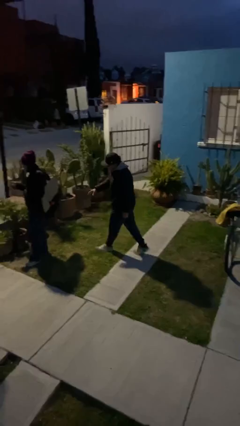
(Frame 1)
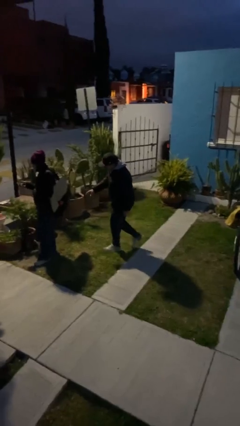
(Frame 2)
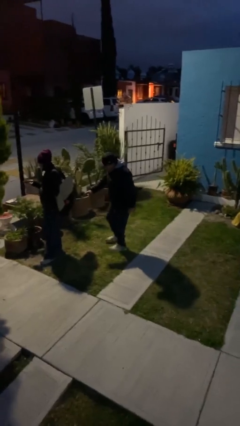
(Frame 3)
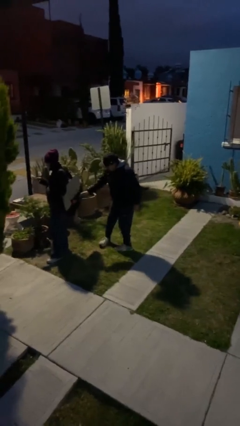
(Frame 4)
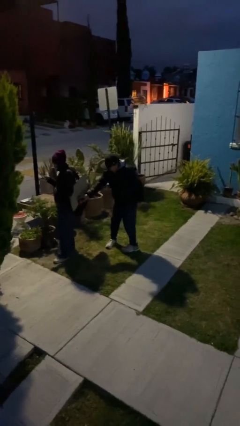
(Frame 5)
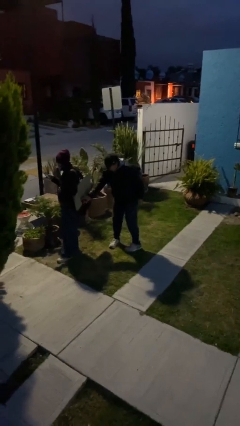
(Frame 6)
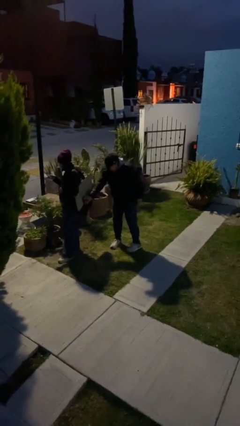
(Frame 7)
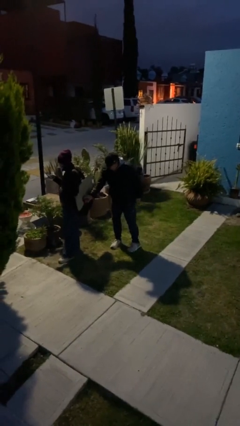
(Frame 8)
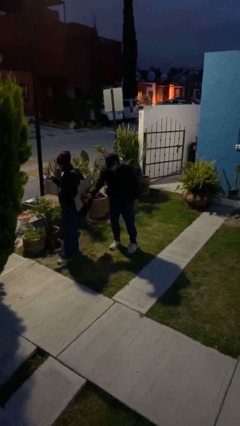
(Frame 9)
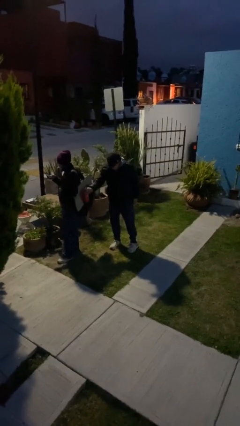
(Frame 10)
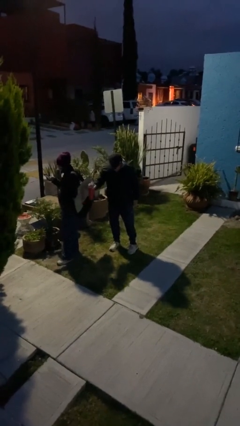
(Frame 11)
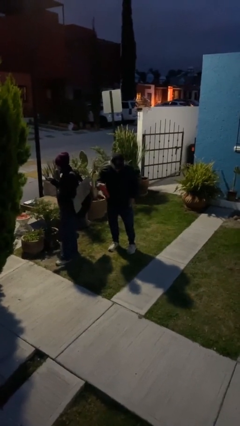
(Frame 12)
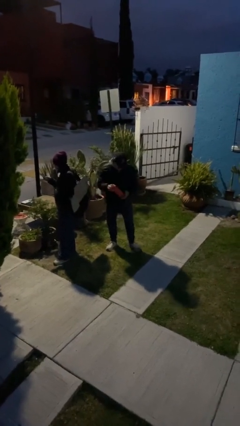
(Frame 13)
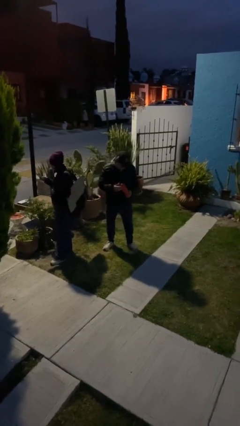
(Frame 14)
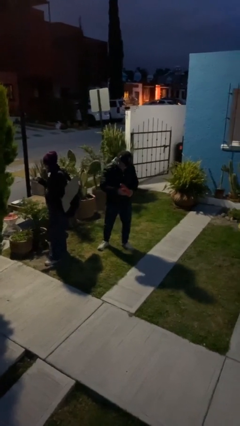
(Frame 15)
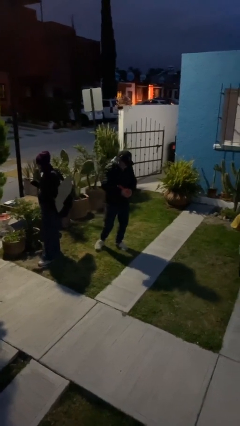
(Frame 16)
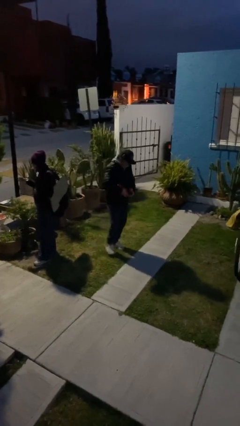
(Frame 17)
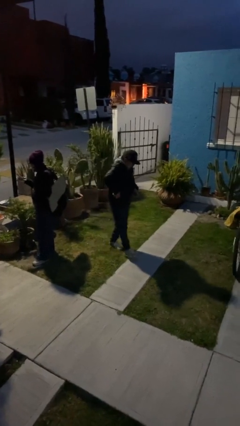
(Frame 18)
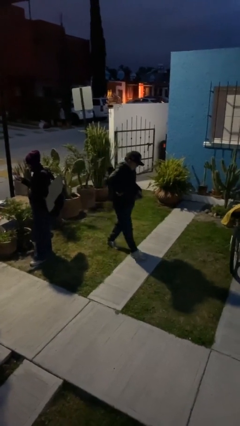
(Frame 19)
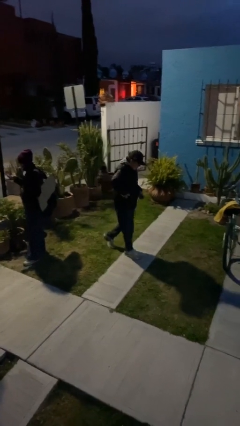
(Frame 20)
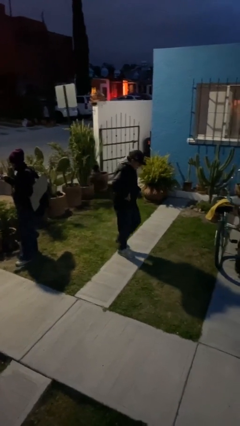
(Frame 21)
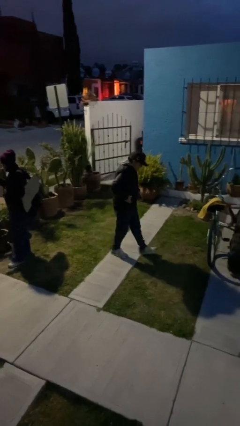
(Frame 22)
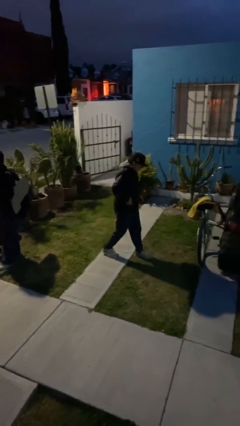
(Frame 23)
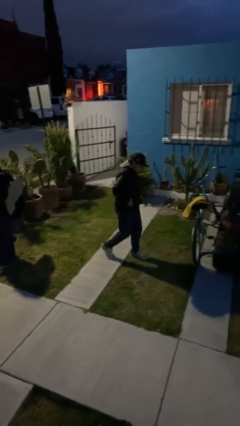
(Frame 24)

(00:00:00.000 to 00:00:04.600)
person steals object from person

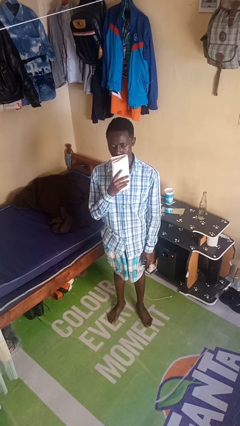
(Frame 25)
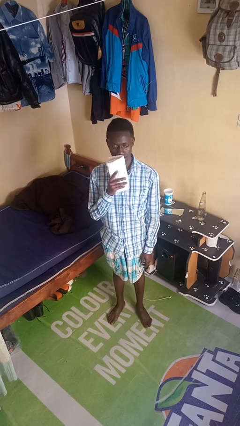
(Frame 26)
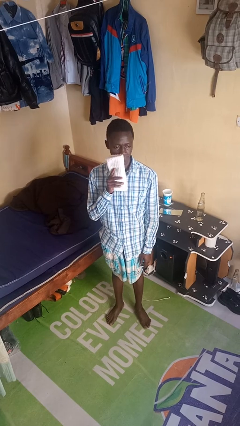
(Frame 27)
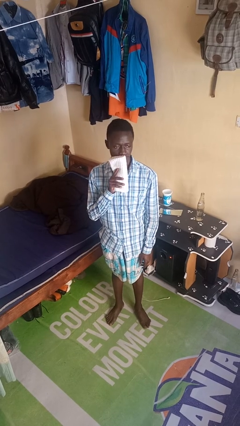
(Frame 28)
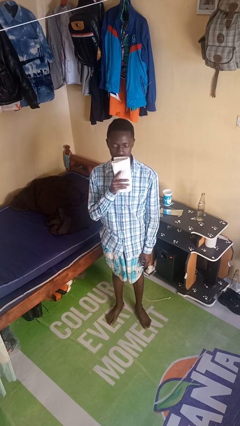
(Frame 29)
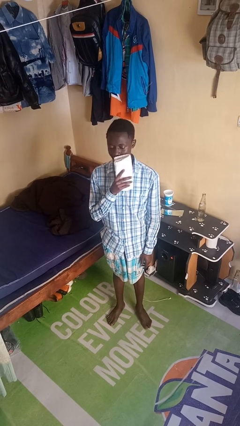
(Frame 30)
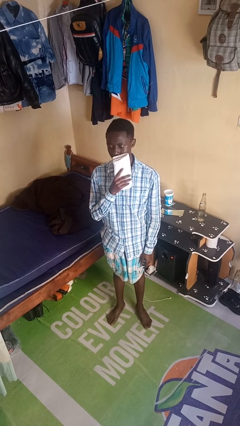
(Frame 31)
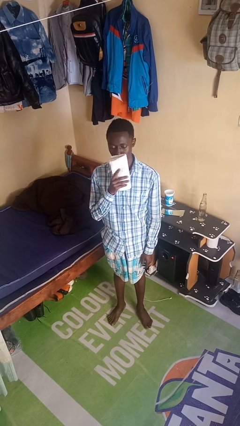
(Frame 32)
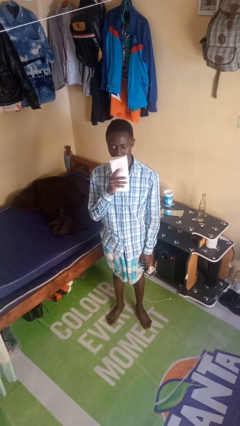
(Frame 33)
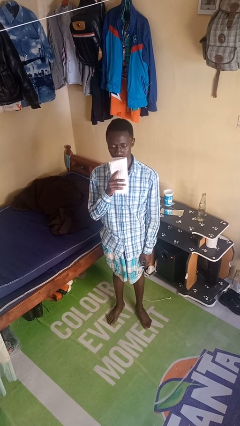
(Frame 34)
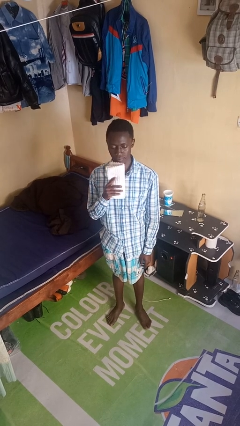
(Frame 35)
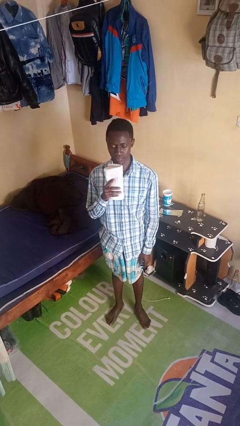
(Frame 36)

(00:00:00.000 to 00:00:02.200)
person wipes mouth with napkin

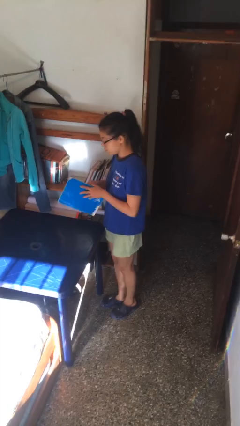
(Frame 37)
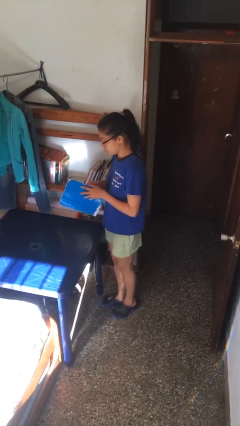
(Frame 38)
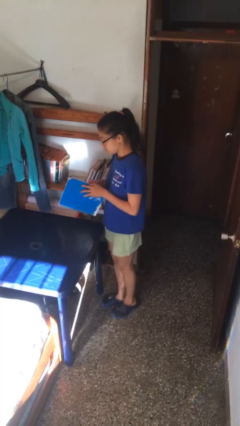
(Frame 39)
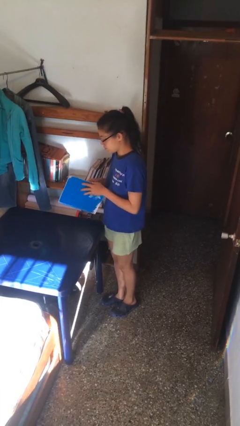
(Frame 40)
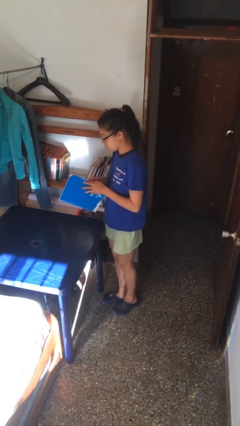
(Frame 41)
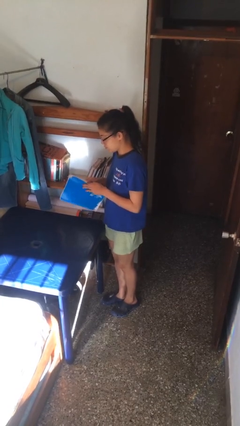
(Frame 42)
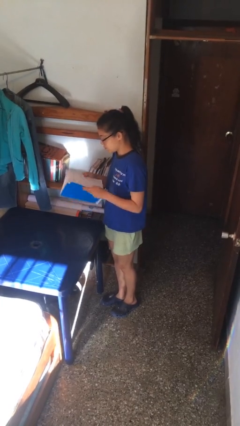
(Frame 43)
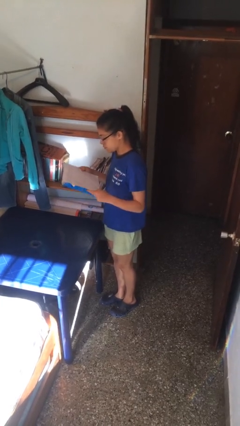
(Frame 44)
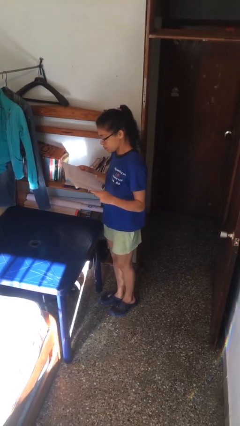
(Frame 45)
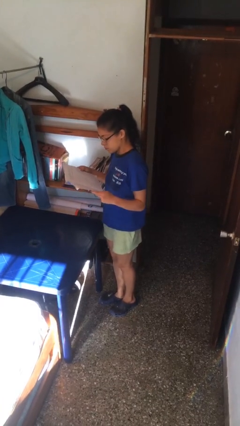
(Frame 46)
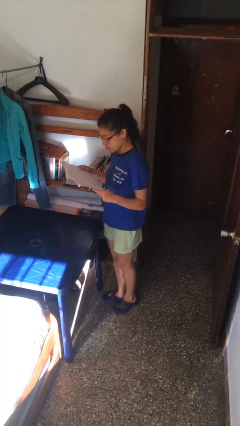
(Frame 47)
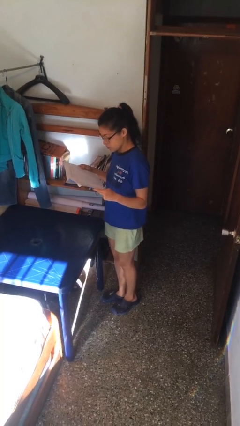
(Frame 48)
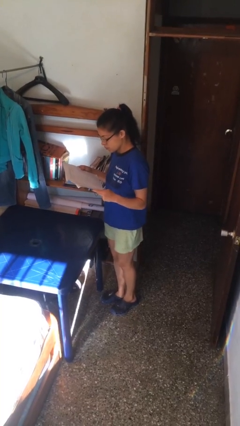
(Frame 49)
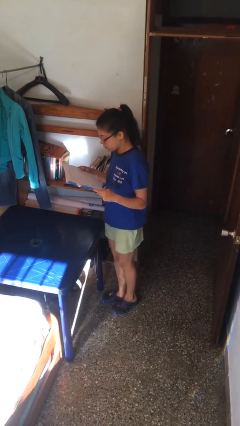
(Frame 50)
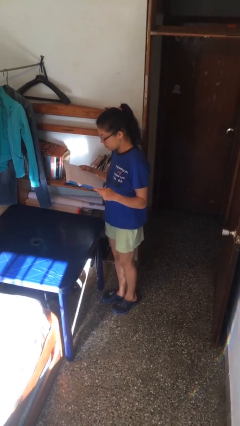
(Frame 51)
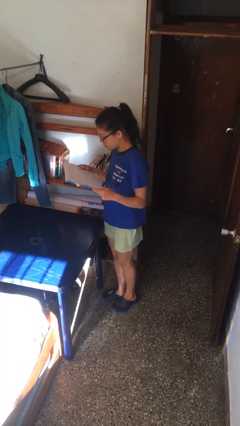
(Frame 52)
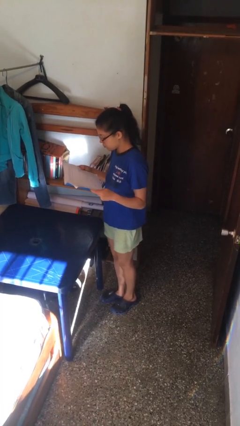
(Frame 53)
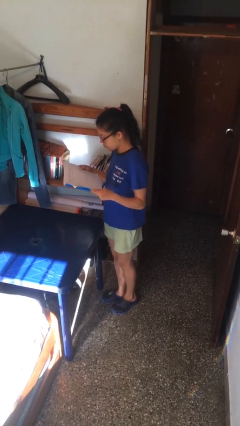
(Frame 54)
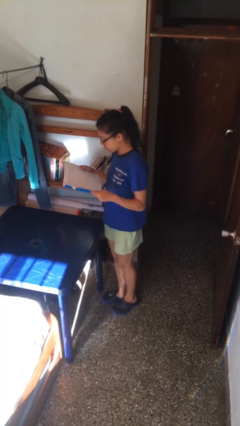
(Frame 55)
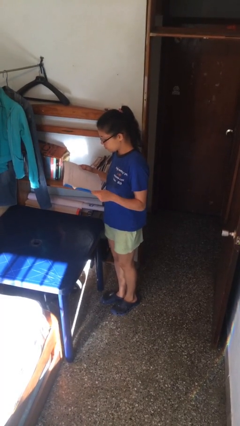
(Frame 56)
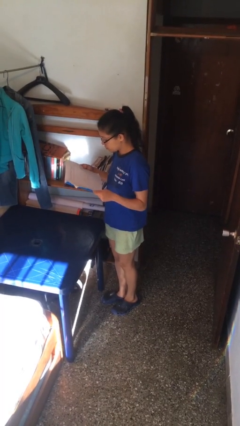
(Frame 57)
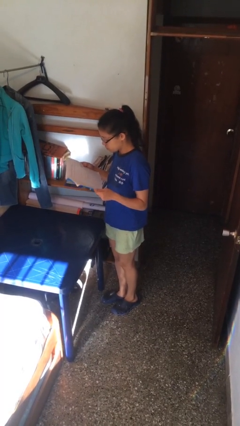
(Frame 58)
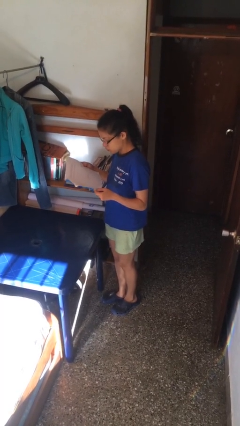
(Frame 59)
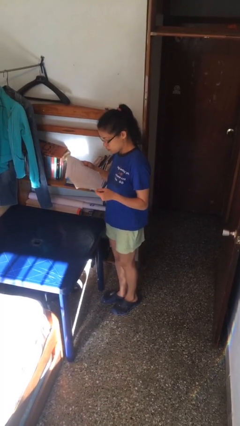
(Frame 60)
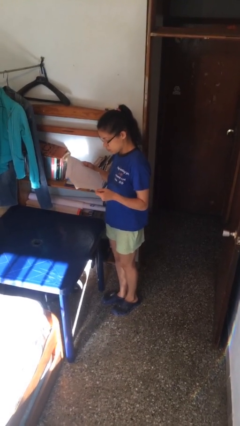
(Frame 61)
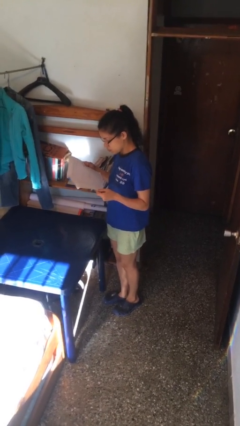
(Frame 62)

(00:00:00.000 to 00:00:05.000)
person reads document

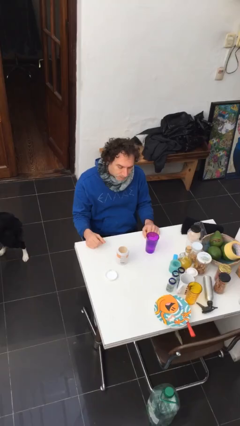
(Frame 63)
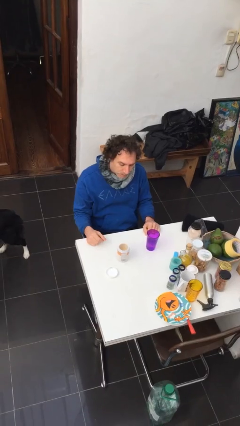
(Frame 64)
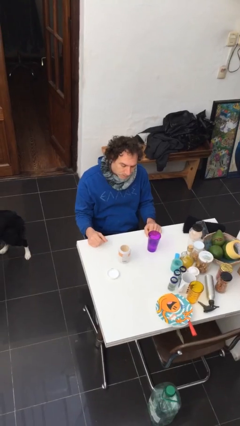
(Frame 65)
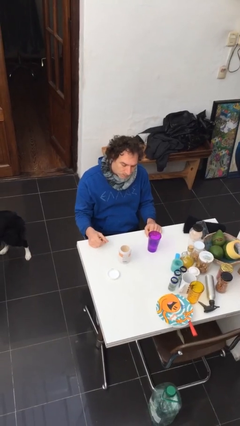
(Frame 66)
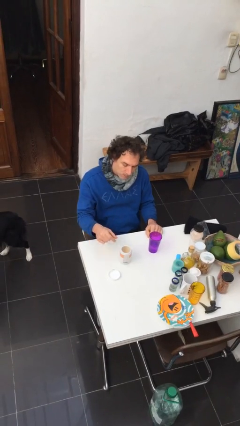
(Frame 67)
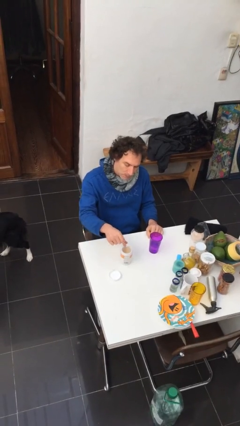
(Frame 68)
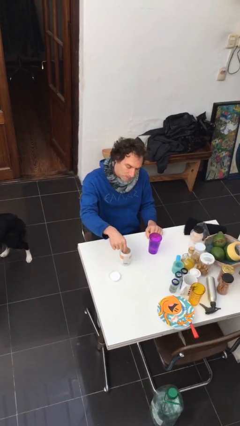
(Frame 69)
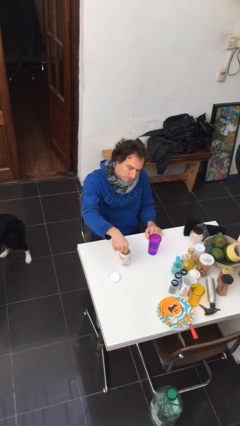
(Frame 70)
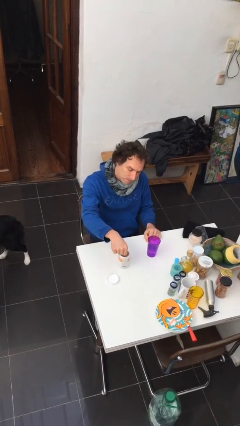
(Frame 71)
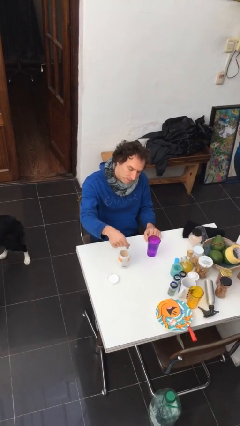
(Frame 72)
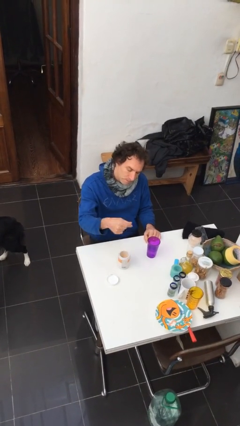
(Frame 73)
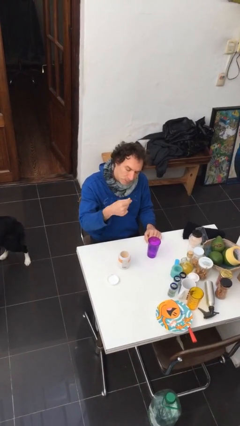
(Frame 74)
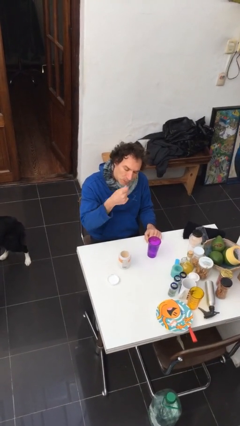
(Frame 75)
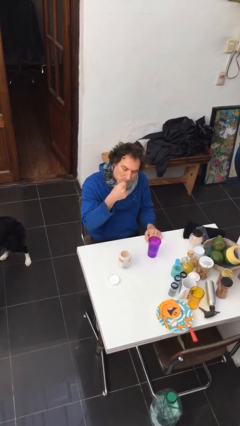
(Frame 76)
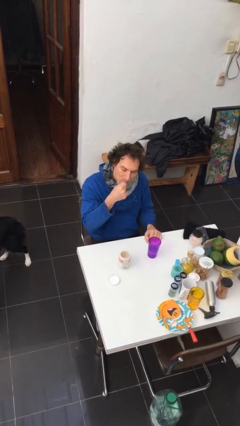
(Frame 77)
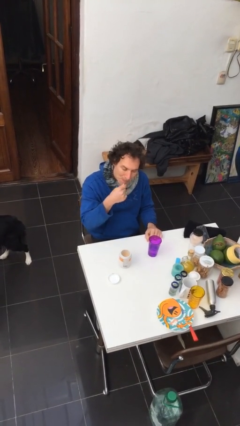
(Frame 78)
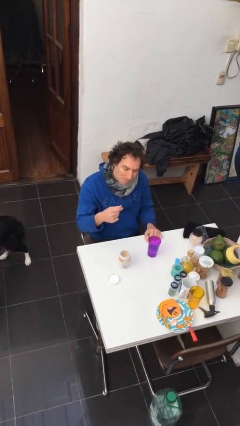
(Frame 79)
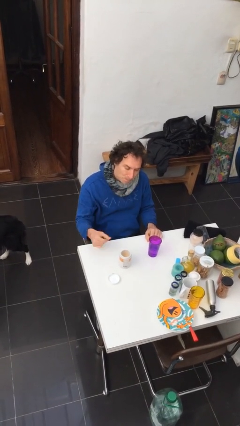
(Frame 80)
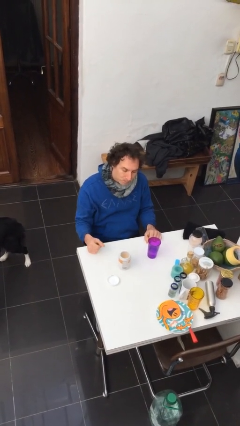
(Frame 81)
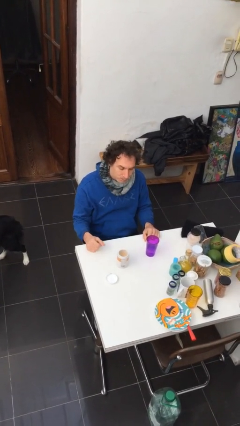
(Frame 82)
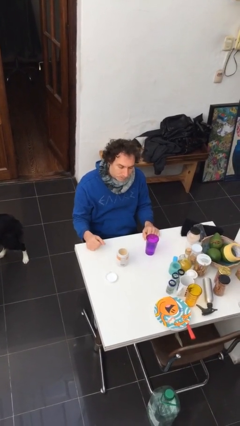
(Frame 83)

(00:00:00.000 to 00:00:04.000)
person takes medicine pills

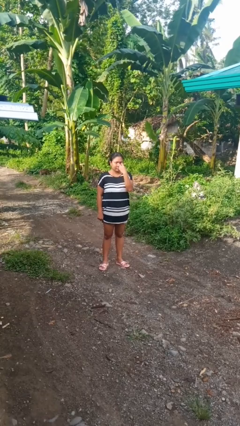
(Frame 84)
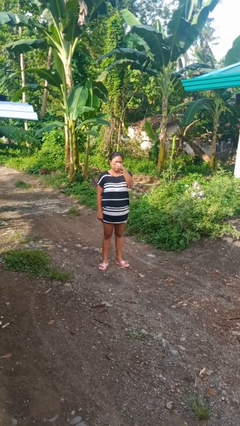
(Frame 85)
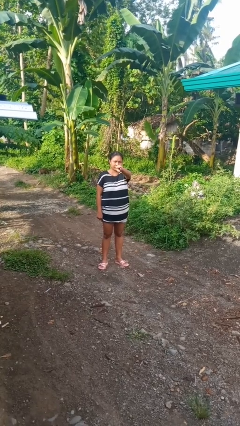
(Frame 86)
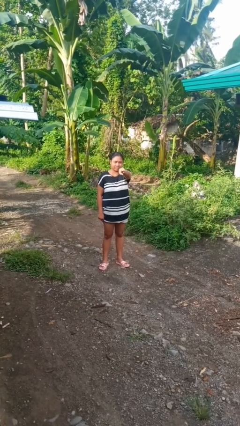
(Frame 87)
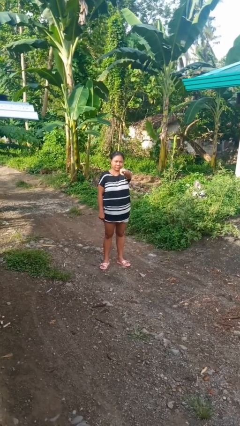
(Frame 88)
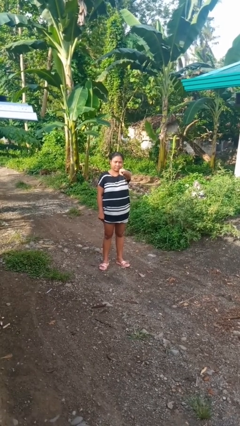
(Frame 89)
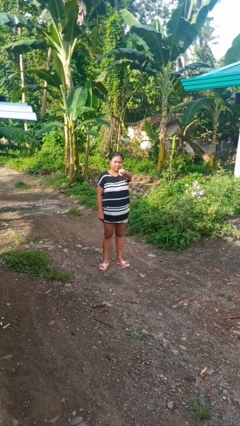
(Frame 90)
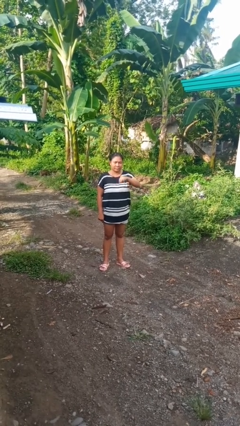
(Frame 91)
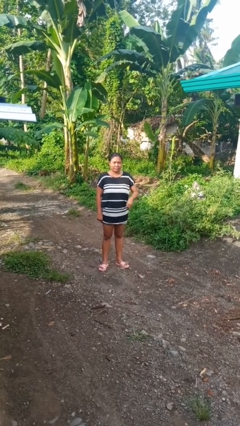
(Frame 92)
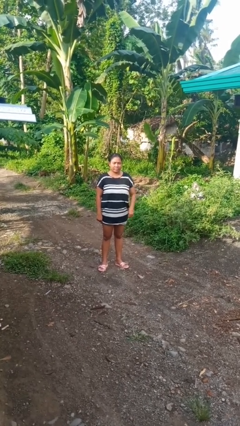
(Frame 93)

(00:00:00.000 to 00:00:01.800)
person gestures watch closely
